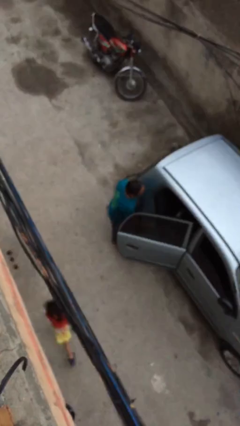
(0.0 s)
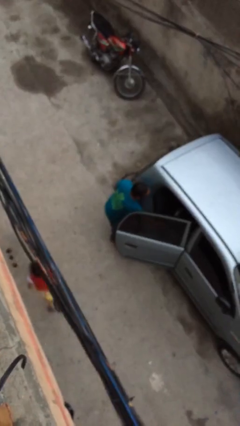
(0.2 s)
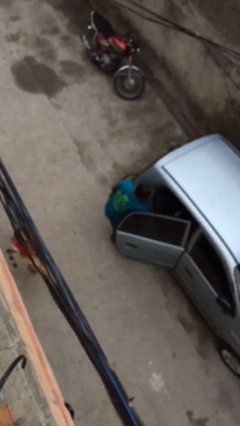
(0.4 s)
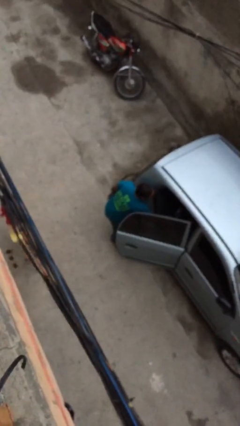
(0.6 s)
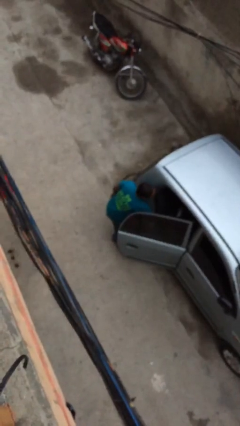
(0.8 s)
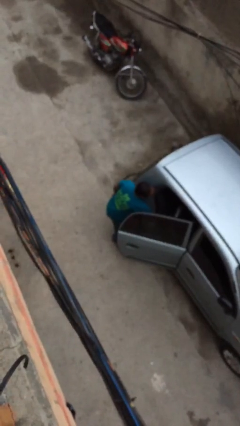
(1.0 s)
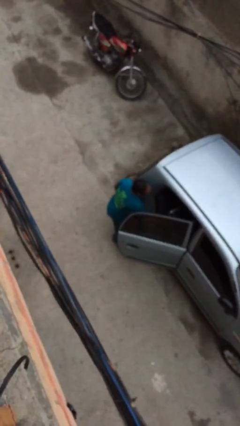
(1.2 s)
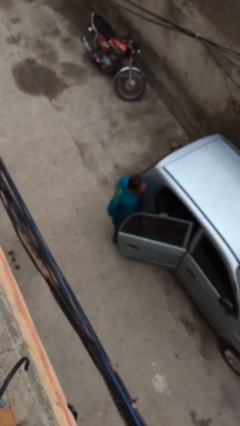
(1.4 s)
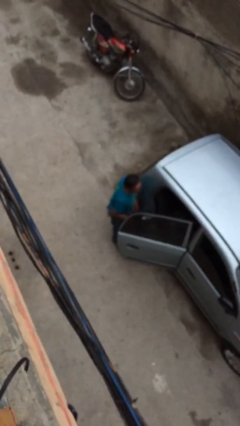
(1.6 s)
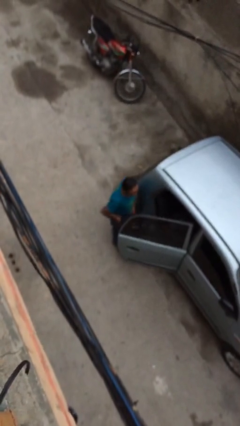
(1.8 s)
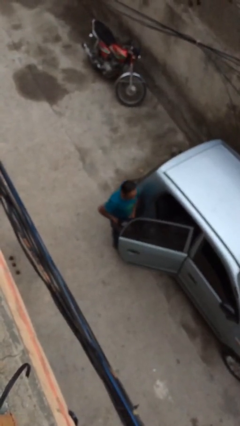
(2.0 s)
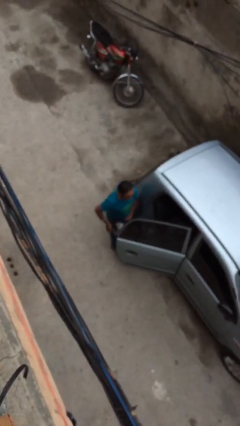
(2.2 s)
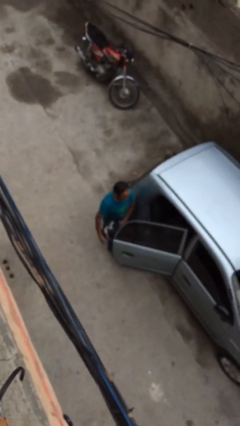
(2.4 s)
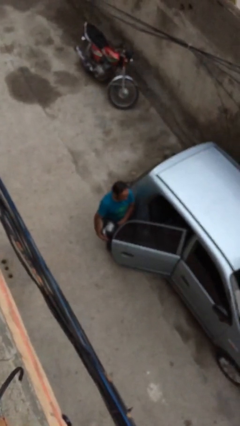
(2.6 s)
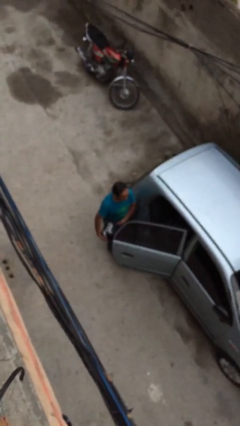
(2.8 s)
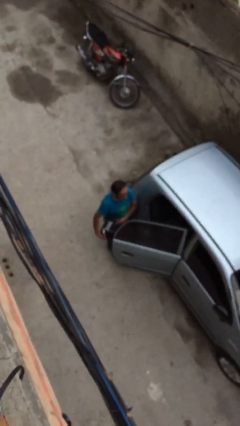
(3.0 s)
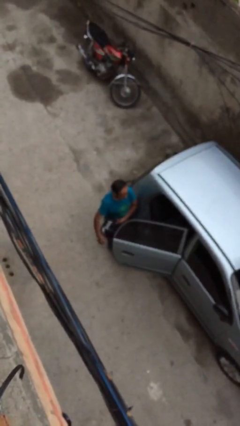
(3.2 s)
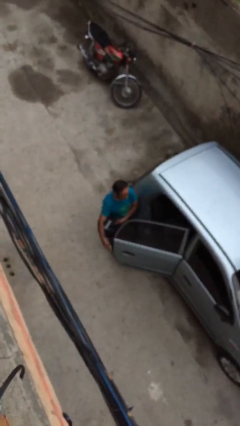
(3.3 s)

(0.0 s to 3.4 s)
person unloads car

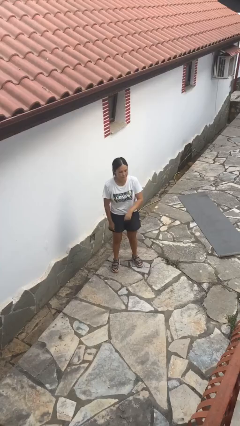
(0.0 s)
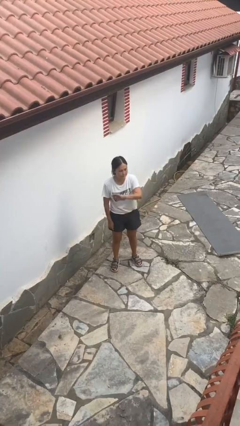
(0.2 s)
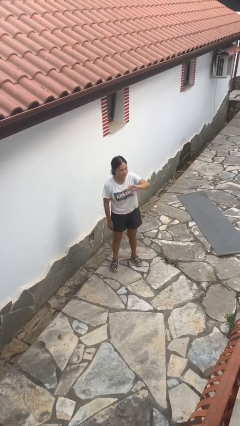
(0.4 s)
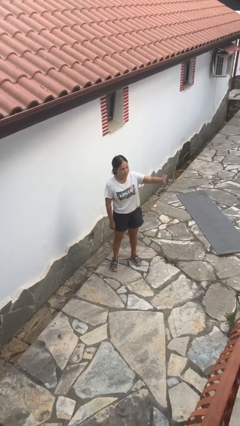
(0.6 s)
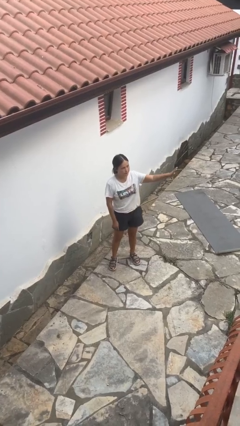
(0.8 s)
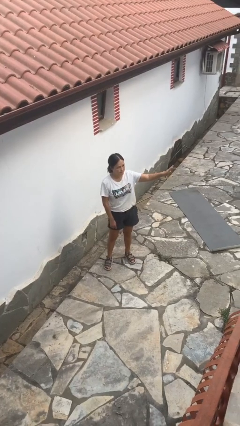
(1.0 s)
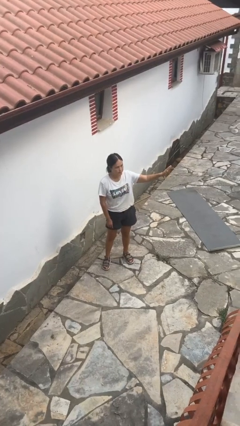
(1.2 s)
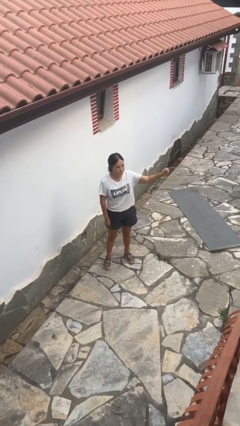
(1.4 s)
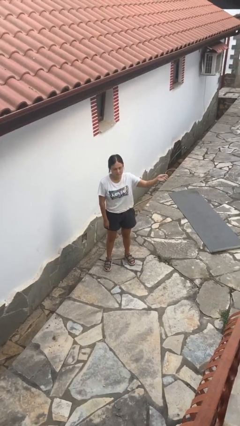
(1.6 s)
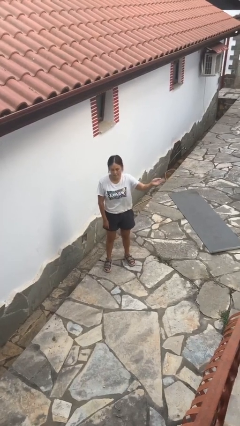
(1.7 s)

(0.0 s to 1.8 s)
person gestures swipe left

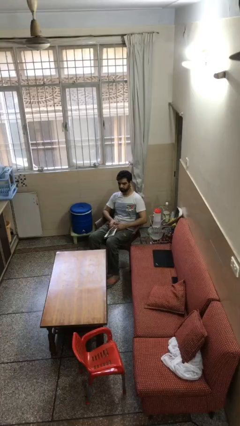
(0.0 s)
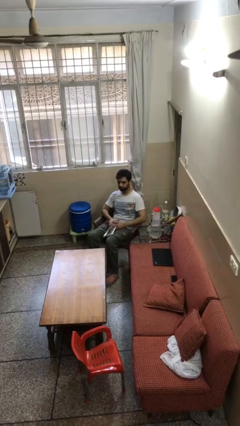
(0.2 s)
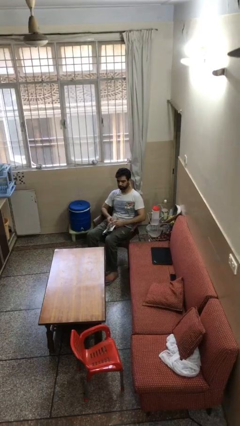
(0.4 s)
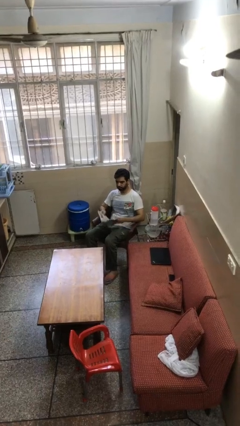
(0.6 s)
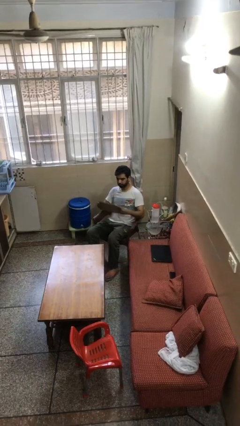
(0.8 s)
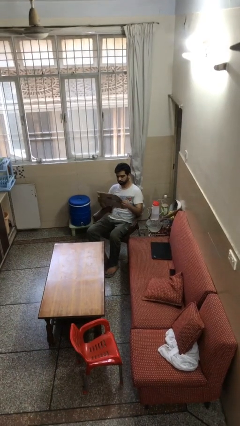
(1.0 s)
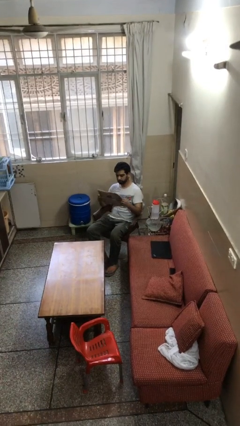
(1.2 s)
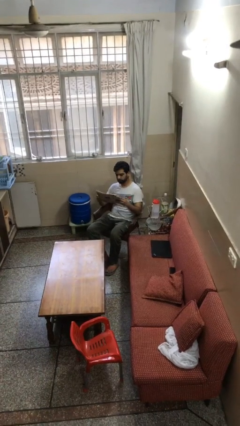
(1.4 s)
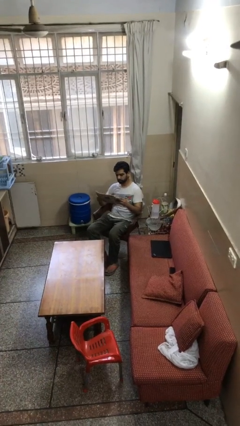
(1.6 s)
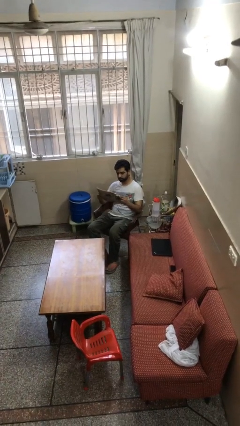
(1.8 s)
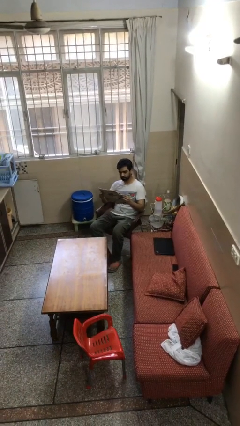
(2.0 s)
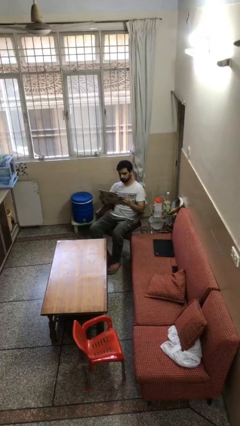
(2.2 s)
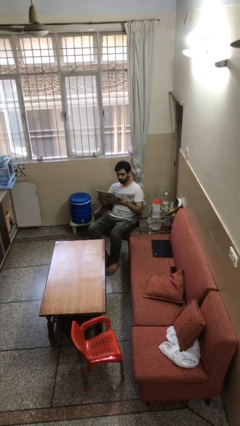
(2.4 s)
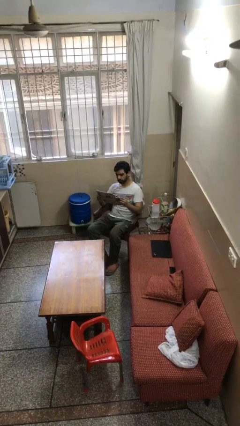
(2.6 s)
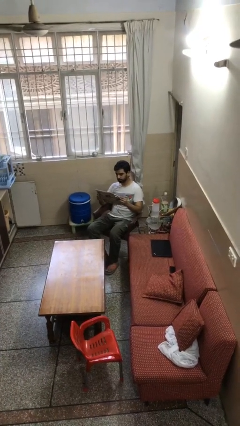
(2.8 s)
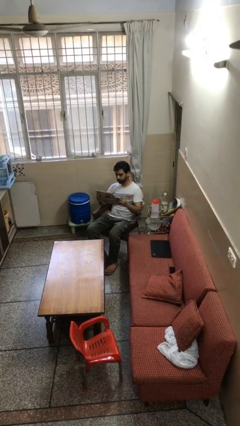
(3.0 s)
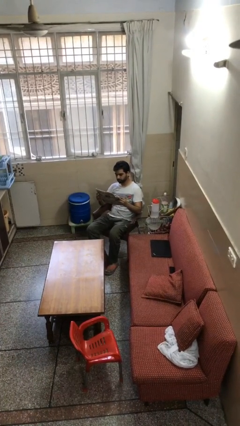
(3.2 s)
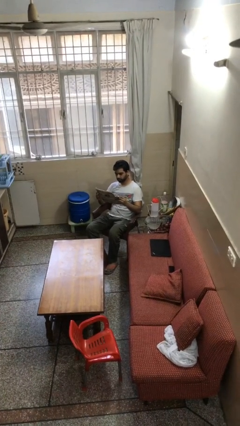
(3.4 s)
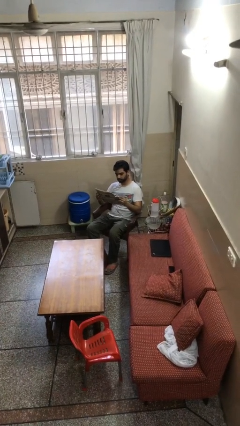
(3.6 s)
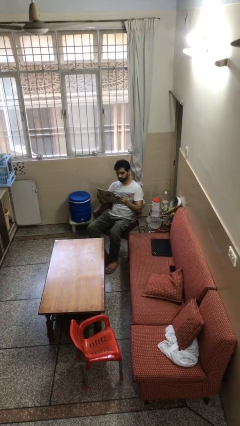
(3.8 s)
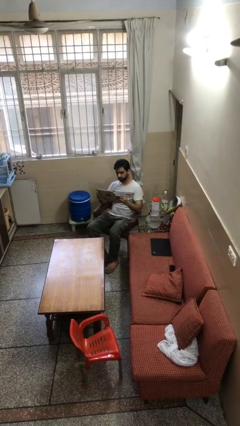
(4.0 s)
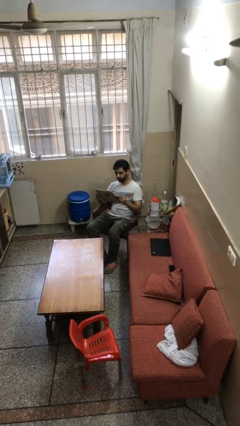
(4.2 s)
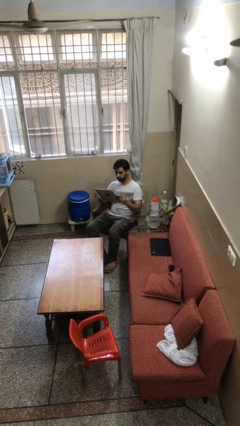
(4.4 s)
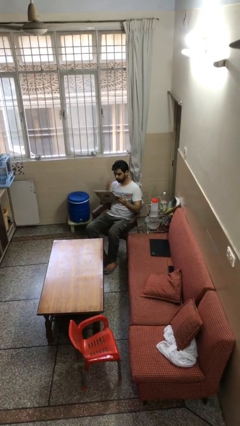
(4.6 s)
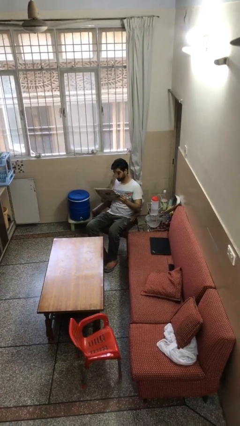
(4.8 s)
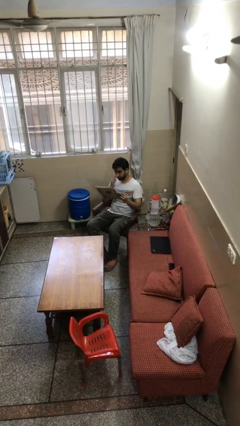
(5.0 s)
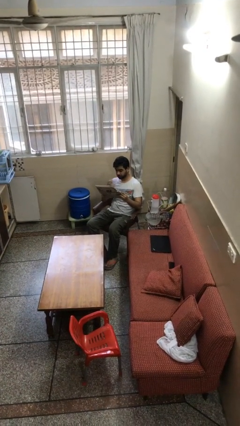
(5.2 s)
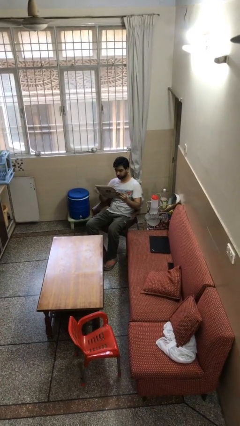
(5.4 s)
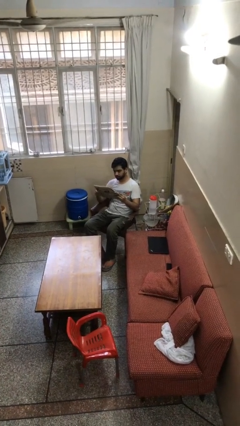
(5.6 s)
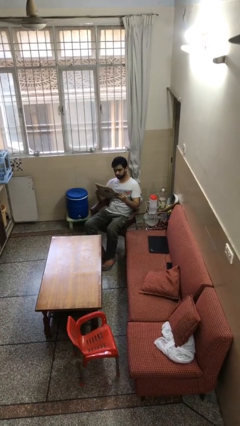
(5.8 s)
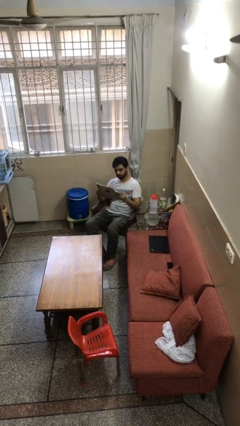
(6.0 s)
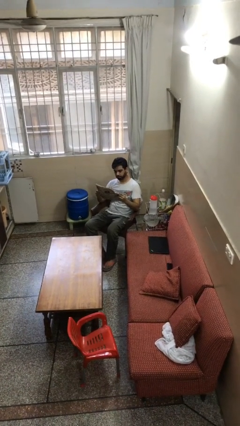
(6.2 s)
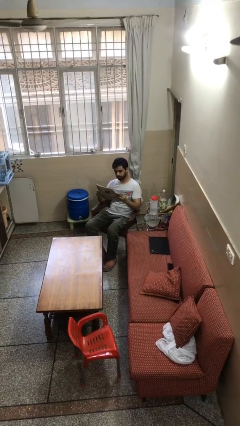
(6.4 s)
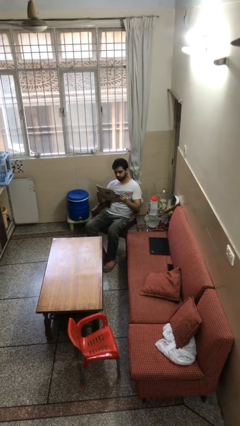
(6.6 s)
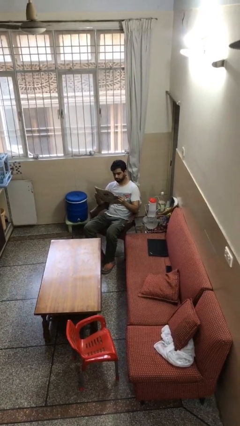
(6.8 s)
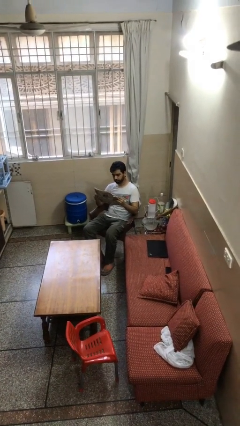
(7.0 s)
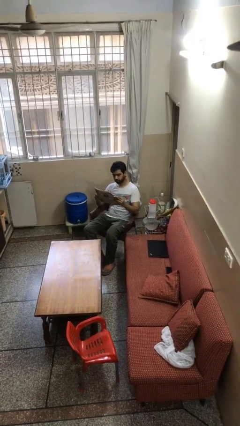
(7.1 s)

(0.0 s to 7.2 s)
person reads document

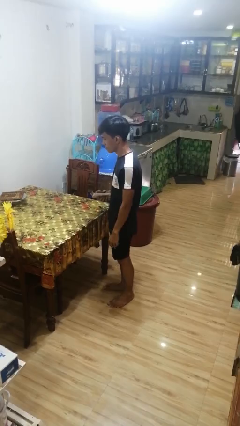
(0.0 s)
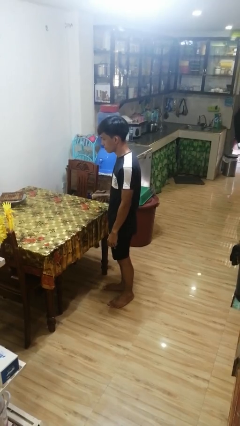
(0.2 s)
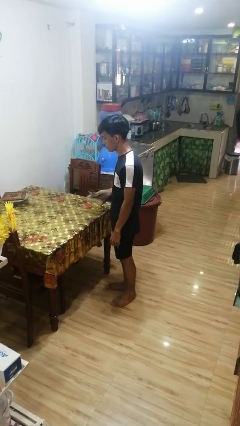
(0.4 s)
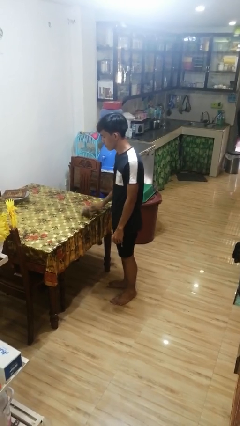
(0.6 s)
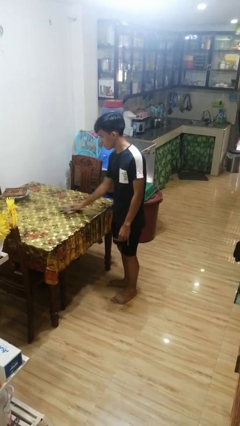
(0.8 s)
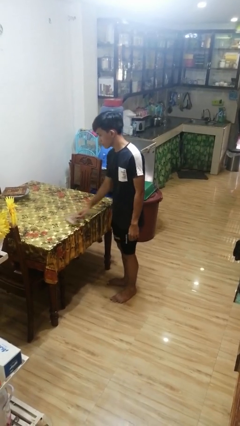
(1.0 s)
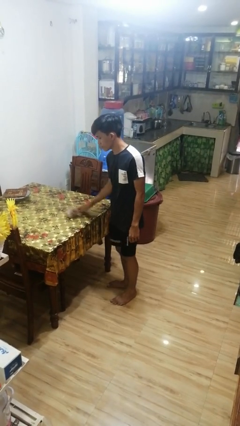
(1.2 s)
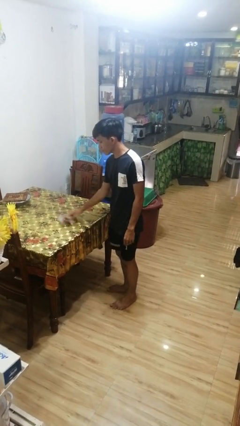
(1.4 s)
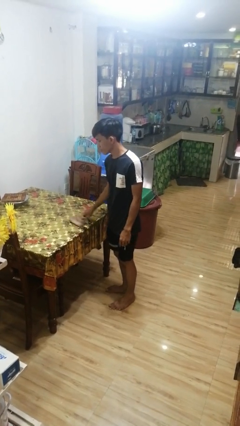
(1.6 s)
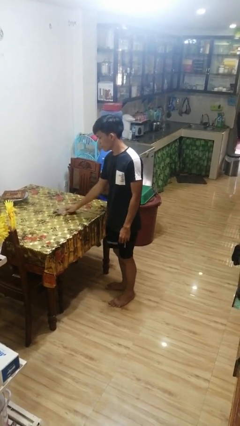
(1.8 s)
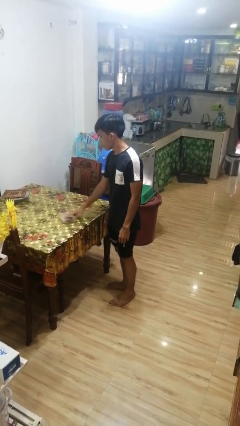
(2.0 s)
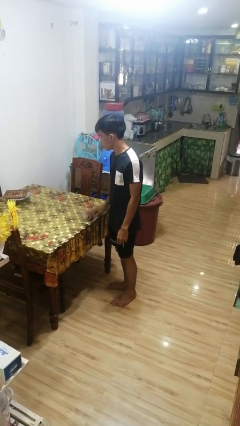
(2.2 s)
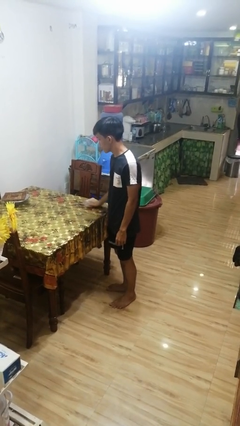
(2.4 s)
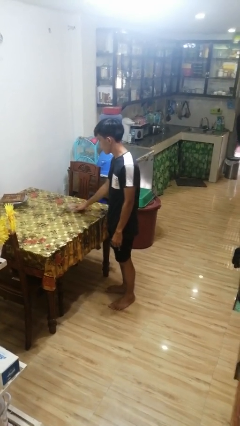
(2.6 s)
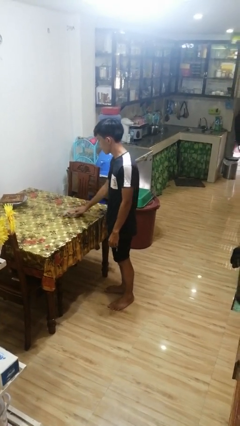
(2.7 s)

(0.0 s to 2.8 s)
person cleans table with rag

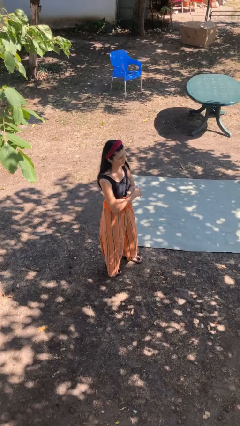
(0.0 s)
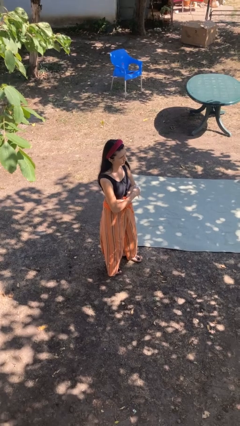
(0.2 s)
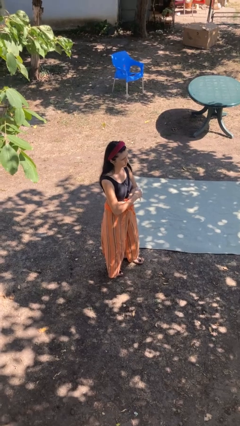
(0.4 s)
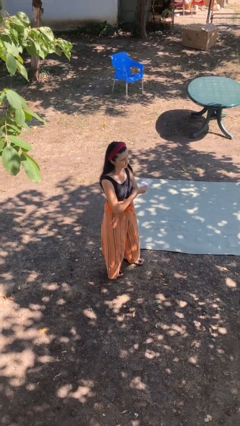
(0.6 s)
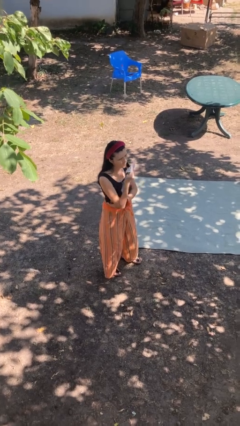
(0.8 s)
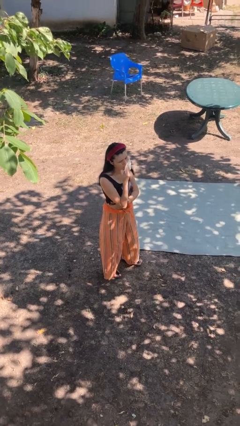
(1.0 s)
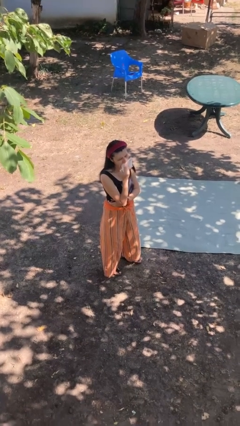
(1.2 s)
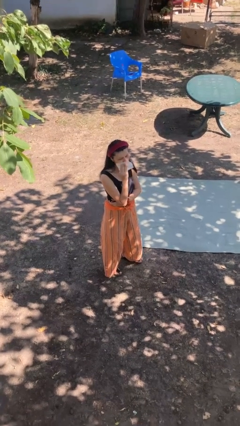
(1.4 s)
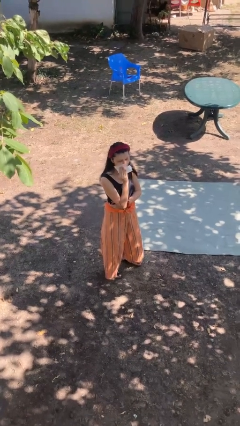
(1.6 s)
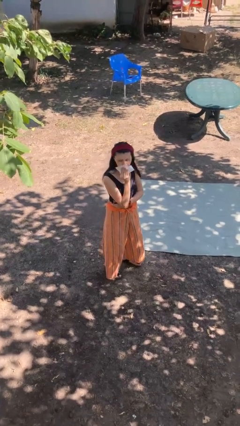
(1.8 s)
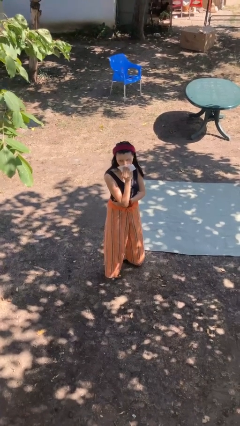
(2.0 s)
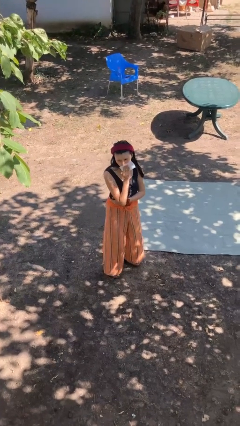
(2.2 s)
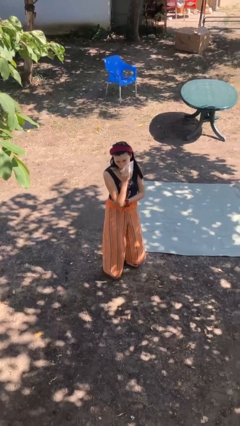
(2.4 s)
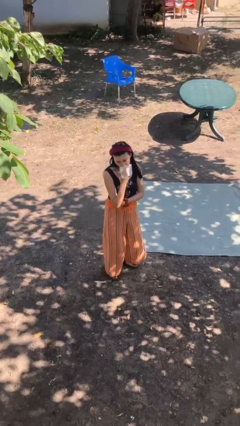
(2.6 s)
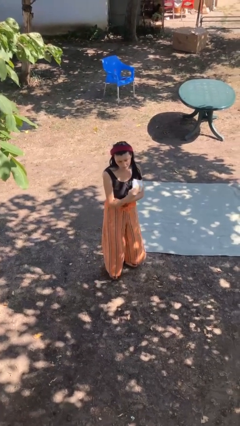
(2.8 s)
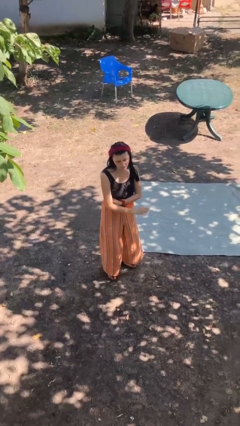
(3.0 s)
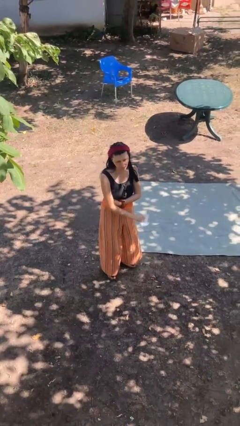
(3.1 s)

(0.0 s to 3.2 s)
person wipes mouth with napkin
